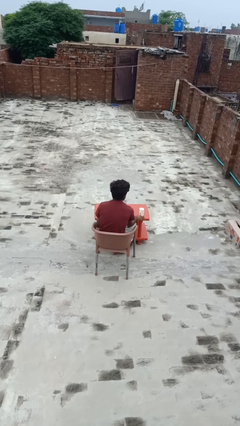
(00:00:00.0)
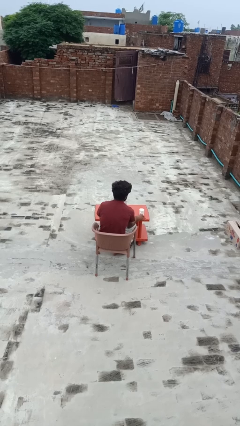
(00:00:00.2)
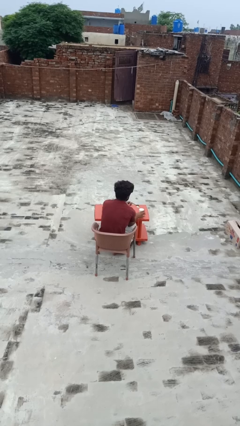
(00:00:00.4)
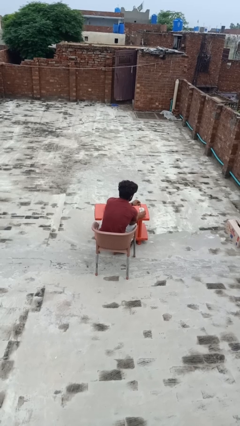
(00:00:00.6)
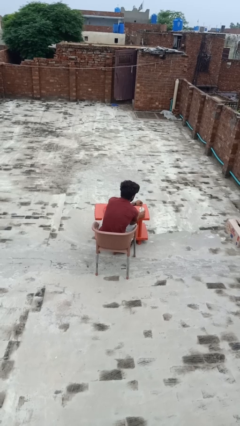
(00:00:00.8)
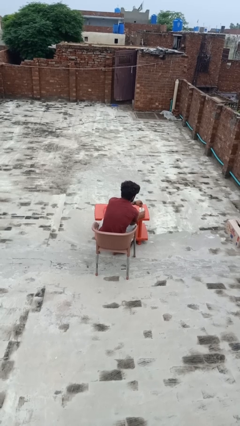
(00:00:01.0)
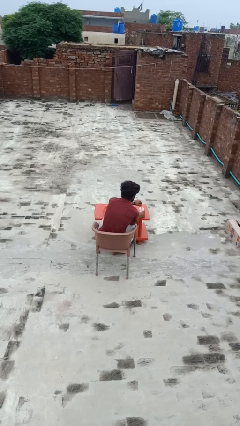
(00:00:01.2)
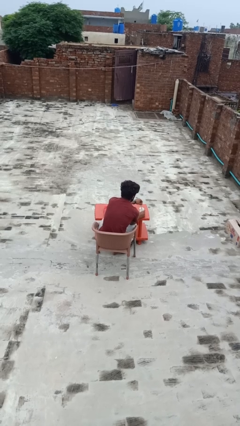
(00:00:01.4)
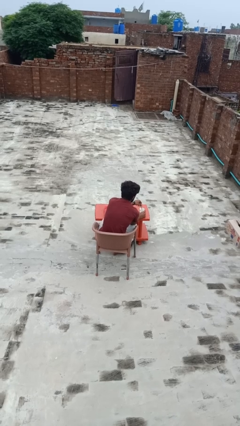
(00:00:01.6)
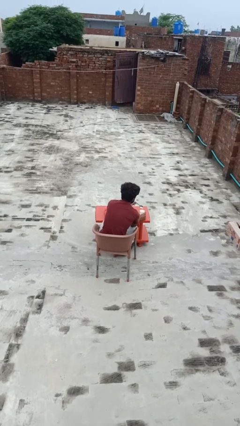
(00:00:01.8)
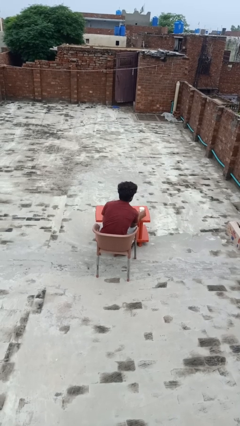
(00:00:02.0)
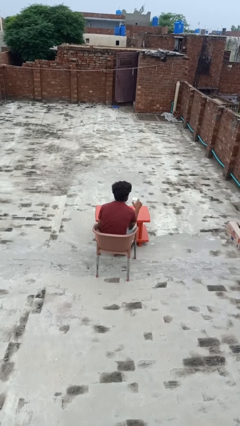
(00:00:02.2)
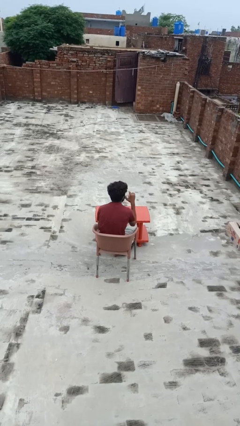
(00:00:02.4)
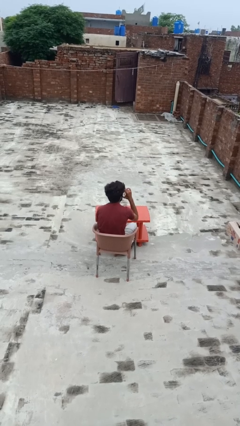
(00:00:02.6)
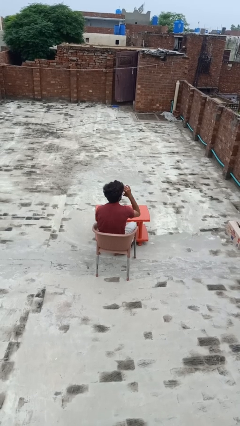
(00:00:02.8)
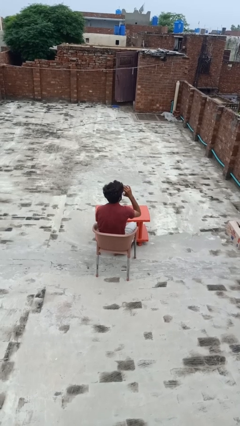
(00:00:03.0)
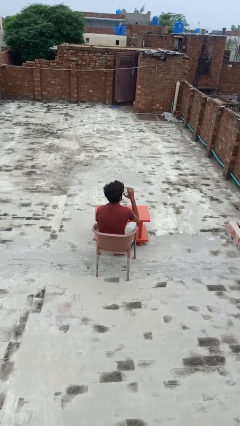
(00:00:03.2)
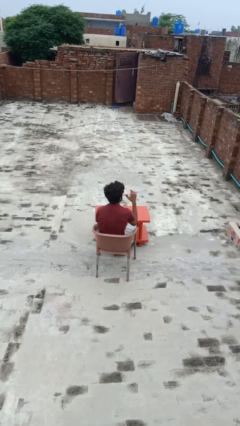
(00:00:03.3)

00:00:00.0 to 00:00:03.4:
person stirs mug

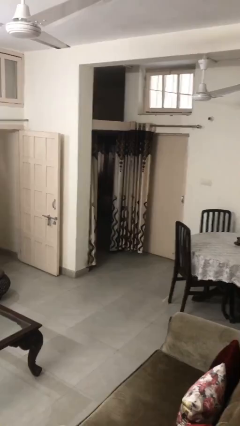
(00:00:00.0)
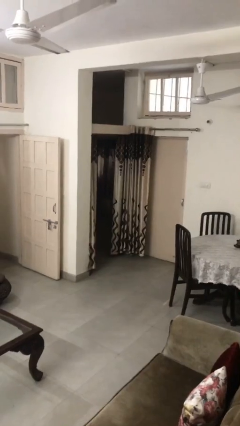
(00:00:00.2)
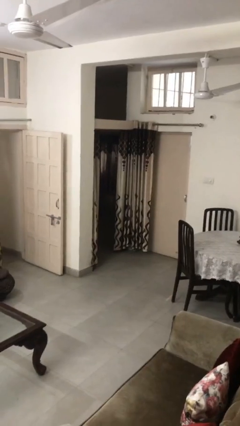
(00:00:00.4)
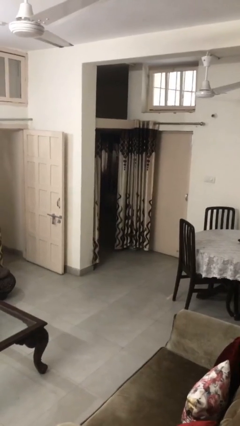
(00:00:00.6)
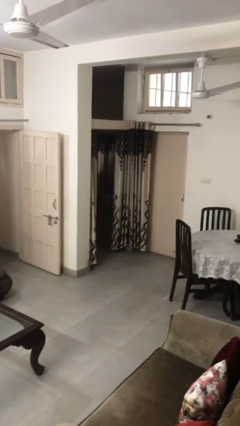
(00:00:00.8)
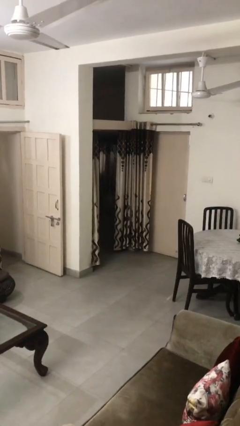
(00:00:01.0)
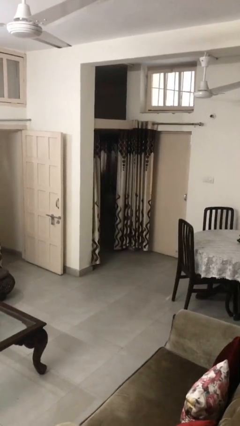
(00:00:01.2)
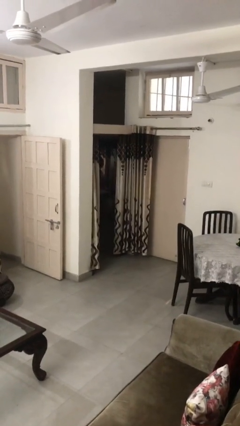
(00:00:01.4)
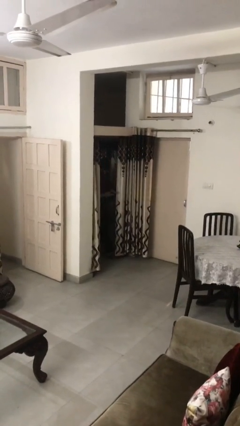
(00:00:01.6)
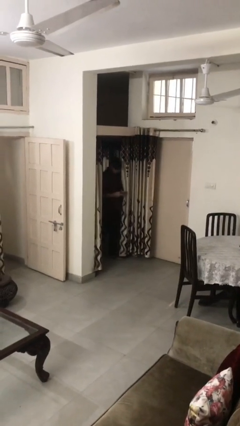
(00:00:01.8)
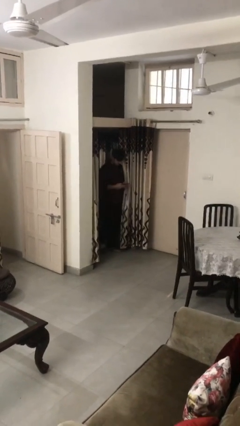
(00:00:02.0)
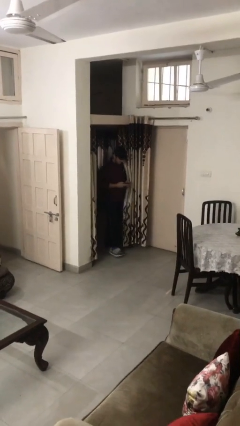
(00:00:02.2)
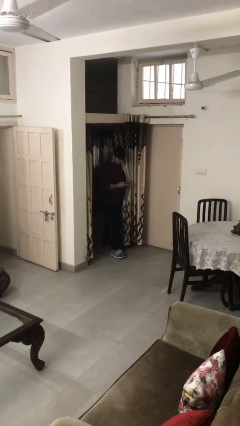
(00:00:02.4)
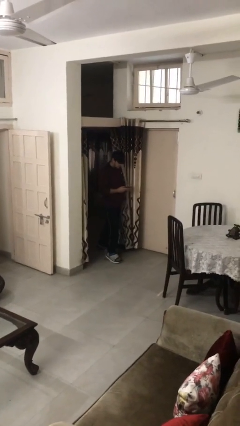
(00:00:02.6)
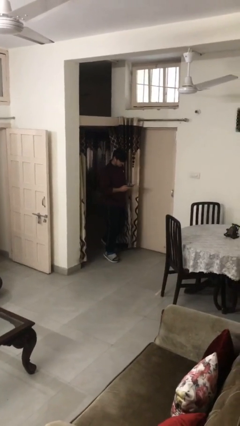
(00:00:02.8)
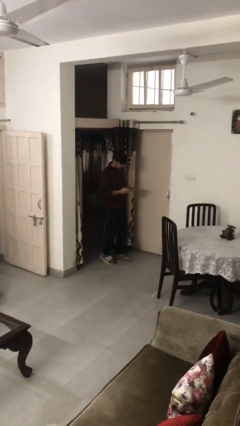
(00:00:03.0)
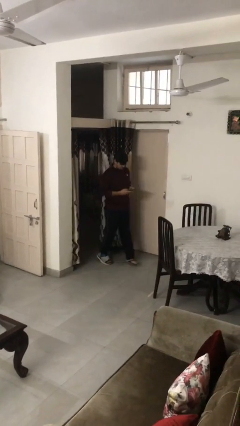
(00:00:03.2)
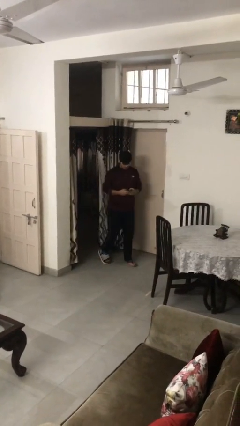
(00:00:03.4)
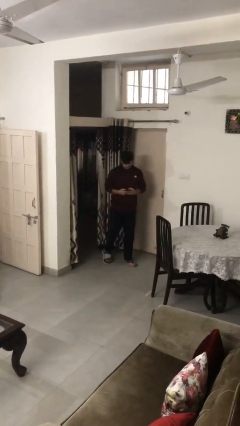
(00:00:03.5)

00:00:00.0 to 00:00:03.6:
person enters scene through structure

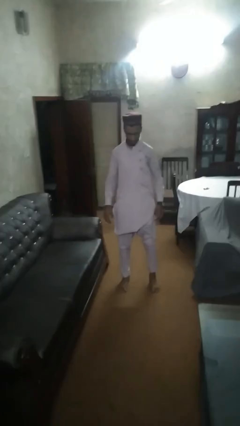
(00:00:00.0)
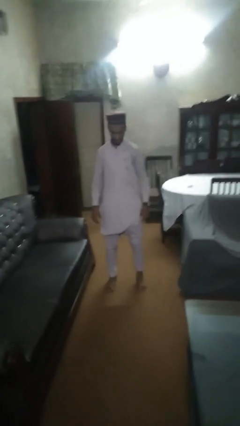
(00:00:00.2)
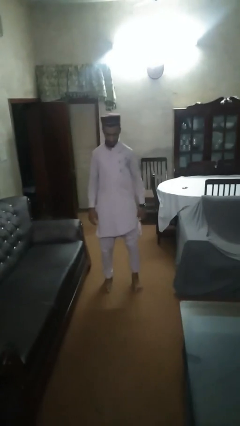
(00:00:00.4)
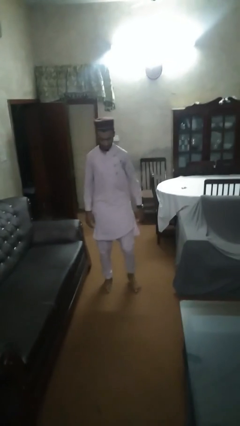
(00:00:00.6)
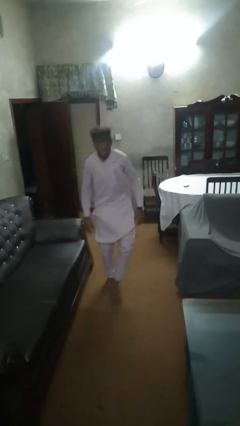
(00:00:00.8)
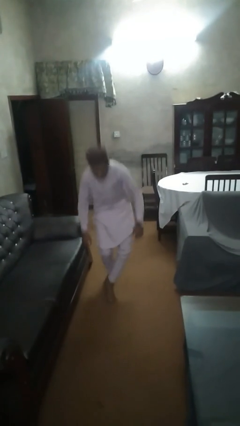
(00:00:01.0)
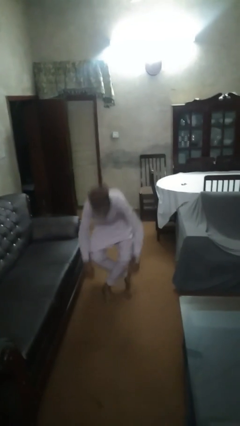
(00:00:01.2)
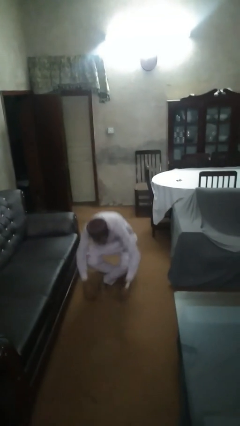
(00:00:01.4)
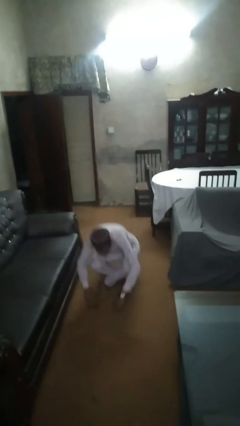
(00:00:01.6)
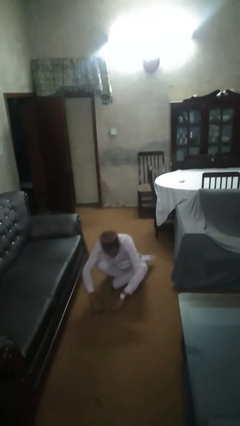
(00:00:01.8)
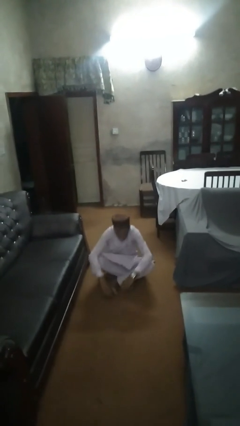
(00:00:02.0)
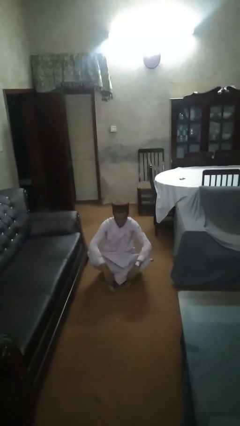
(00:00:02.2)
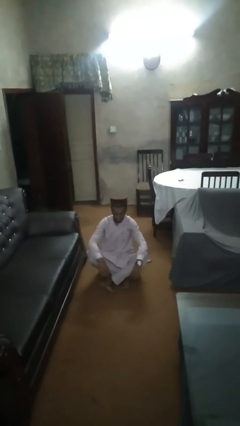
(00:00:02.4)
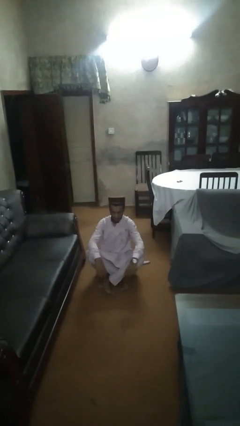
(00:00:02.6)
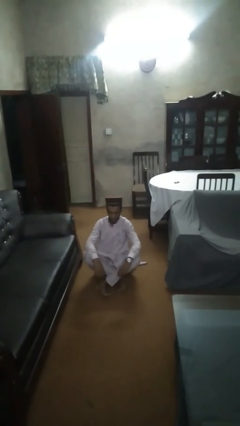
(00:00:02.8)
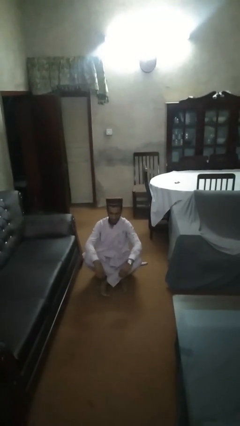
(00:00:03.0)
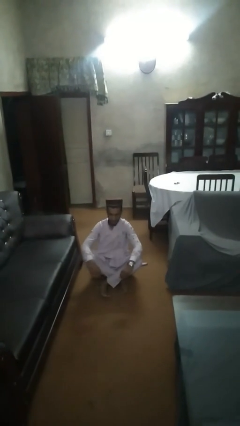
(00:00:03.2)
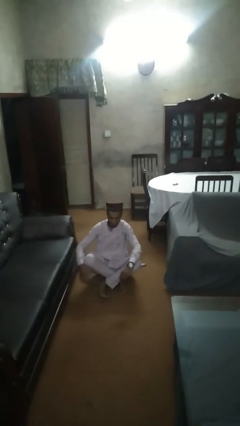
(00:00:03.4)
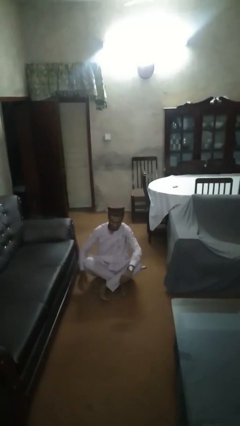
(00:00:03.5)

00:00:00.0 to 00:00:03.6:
person sits crisscross

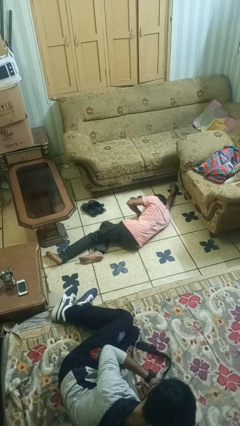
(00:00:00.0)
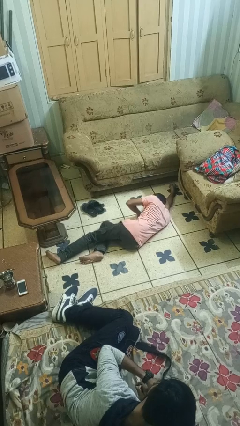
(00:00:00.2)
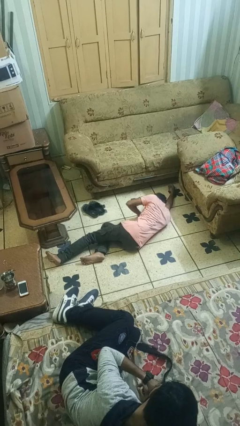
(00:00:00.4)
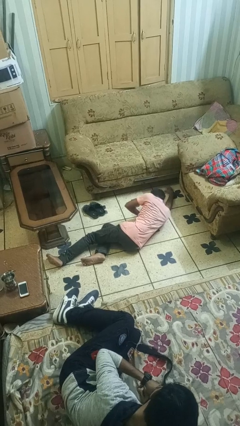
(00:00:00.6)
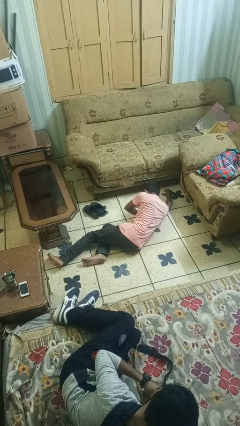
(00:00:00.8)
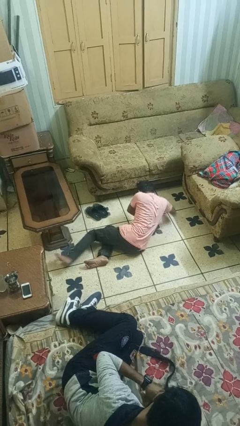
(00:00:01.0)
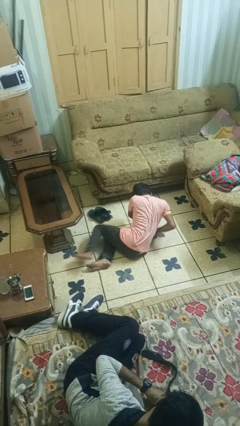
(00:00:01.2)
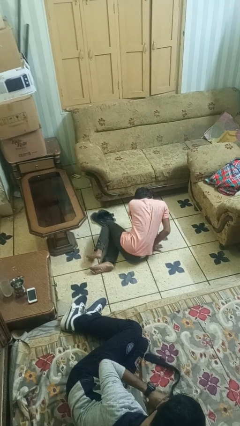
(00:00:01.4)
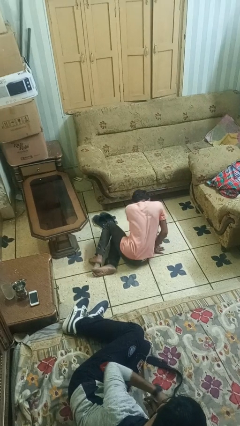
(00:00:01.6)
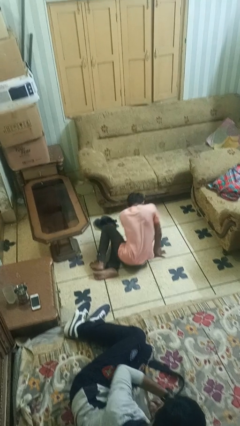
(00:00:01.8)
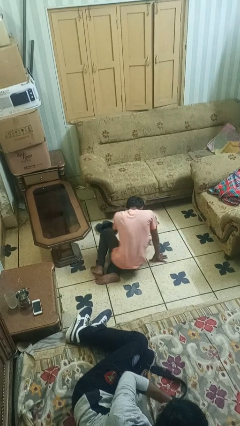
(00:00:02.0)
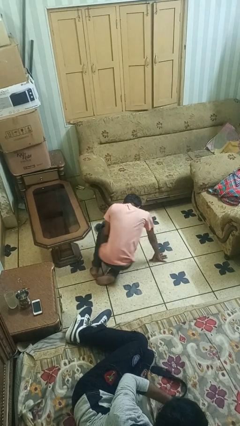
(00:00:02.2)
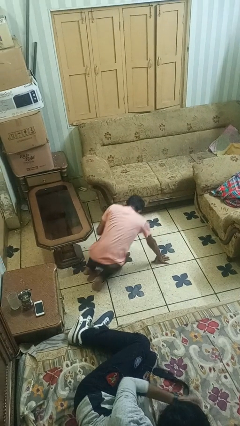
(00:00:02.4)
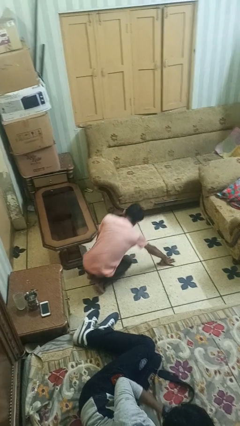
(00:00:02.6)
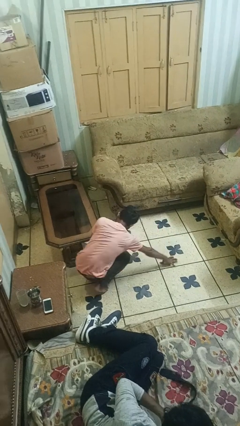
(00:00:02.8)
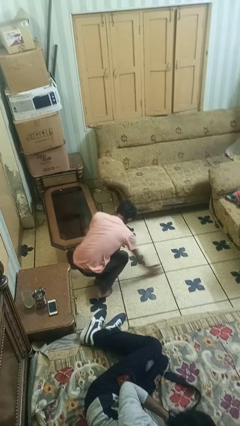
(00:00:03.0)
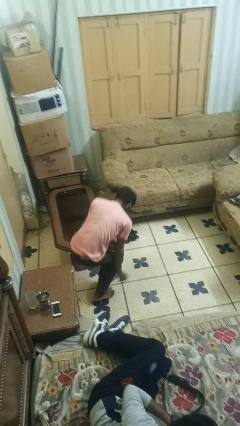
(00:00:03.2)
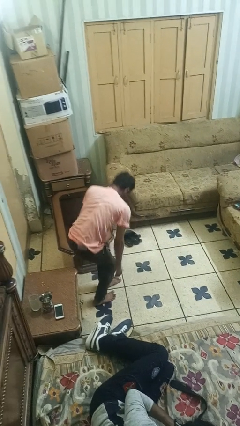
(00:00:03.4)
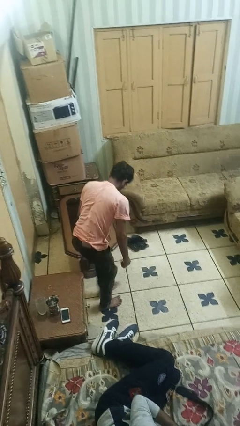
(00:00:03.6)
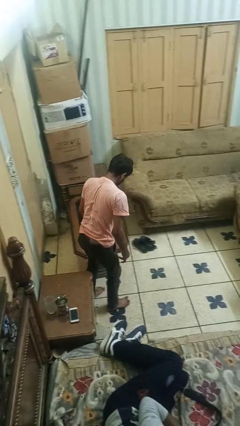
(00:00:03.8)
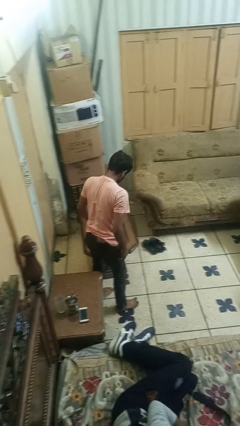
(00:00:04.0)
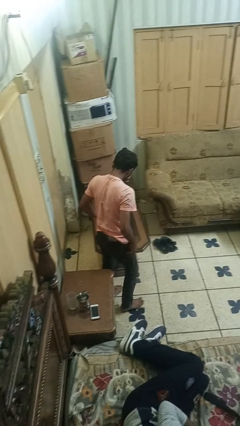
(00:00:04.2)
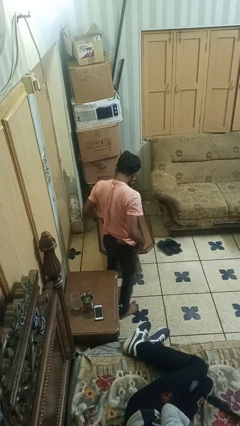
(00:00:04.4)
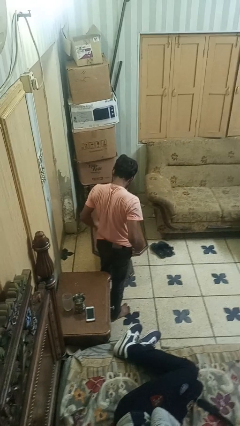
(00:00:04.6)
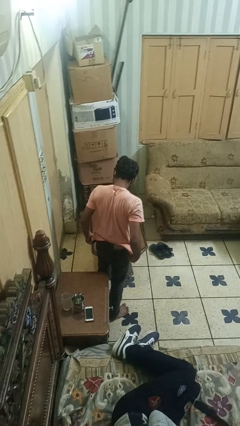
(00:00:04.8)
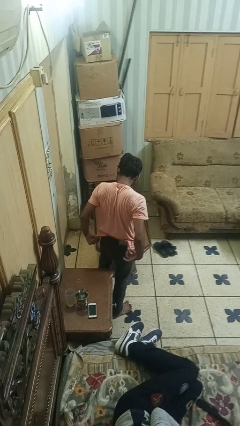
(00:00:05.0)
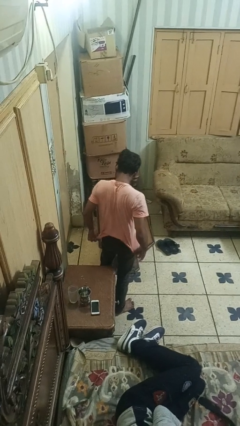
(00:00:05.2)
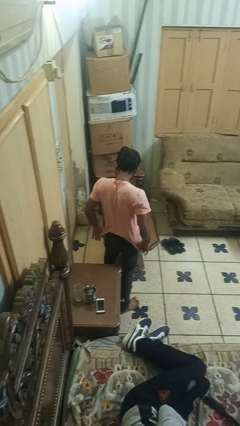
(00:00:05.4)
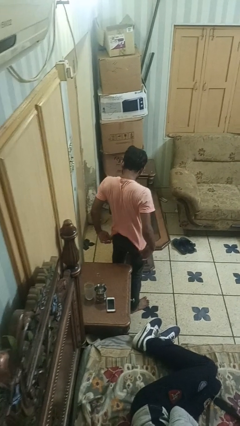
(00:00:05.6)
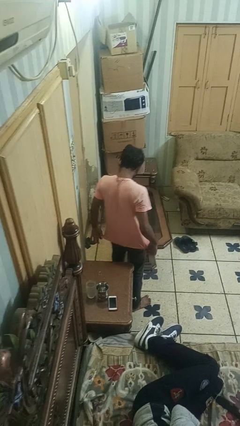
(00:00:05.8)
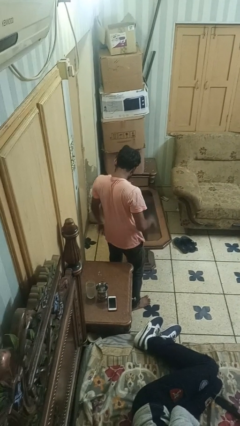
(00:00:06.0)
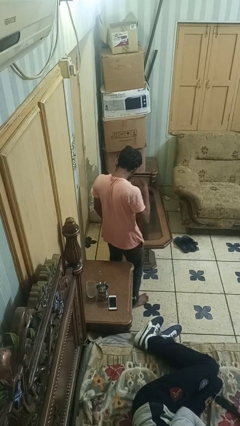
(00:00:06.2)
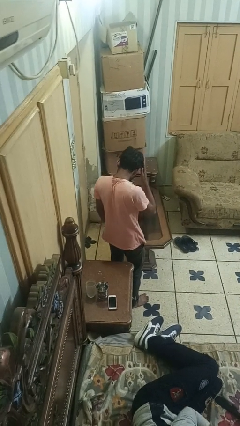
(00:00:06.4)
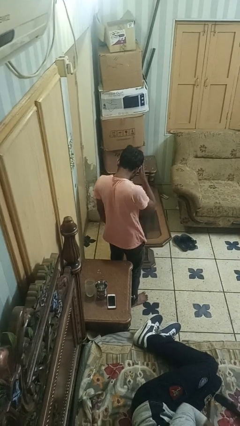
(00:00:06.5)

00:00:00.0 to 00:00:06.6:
person stands up from floor

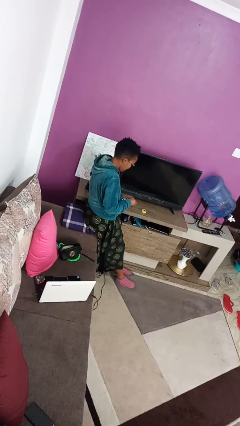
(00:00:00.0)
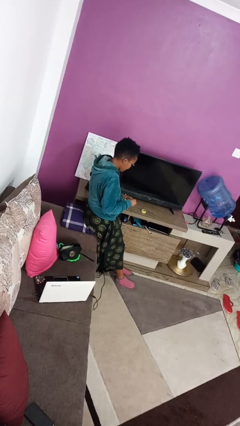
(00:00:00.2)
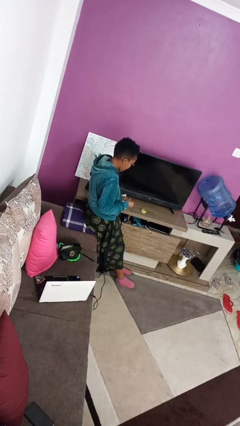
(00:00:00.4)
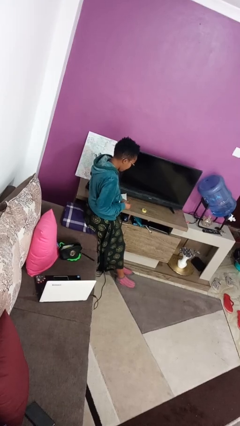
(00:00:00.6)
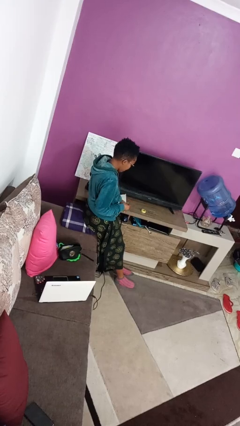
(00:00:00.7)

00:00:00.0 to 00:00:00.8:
person extinguishes candle
